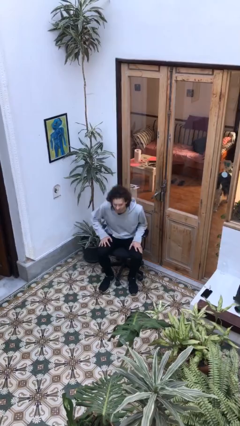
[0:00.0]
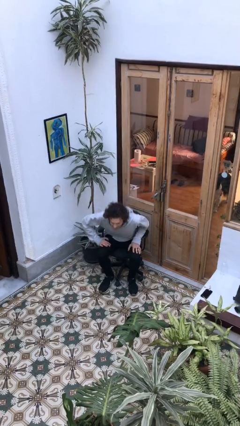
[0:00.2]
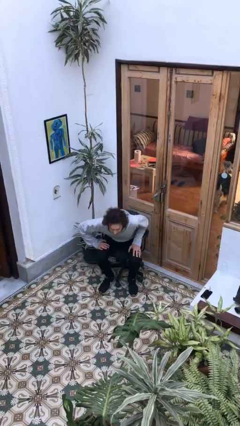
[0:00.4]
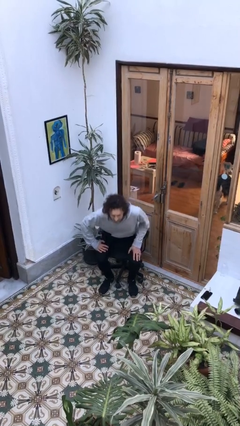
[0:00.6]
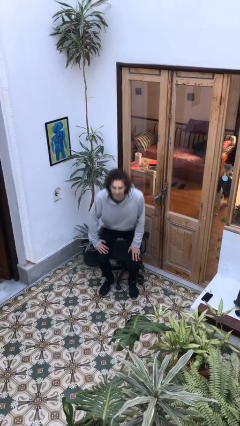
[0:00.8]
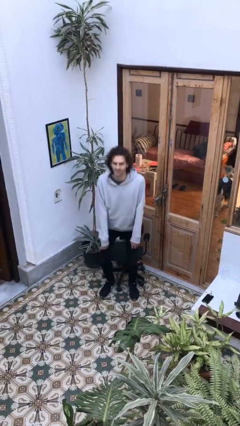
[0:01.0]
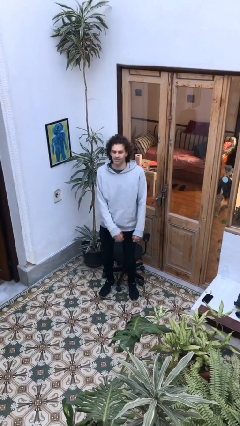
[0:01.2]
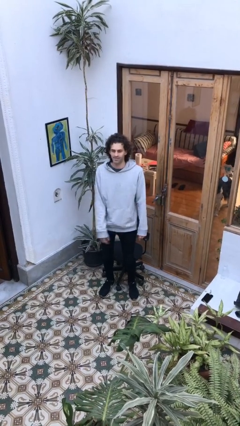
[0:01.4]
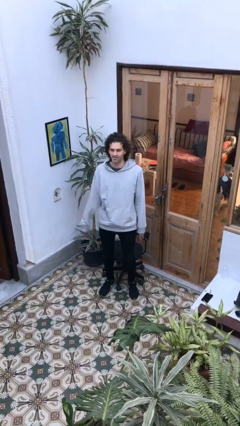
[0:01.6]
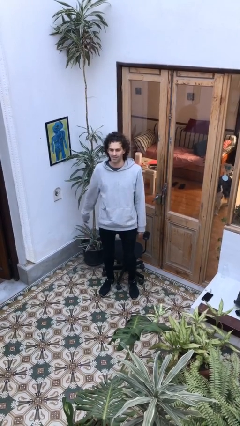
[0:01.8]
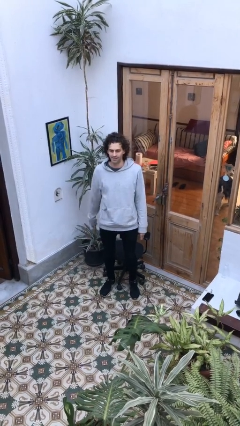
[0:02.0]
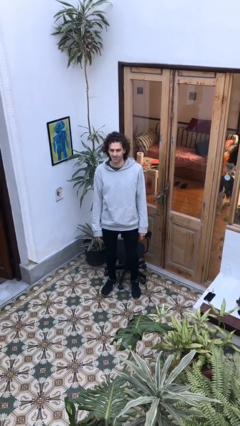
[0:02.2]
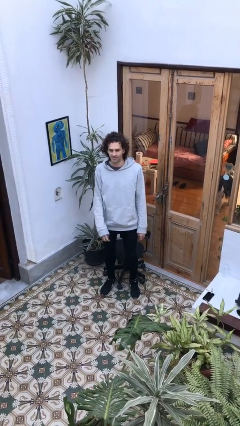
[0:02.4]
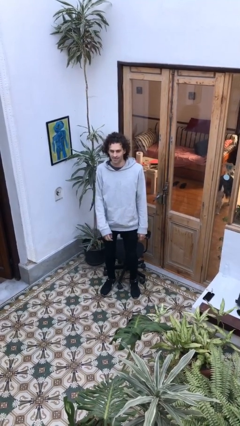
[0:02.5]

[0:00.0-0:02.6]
person stands up

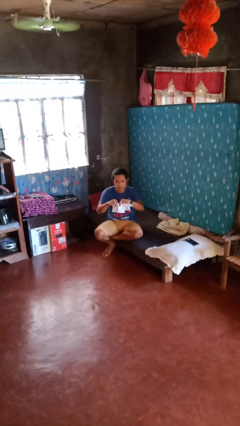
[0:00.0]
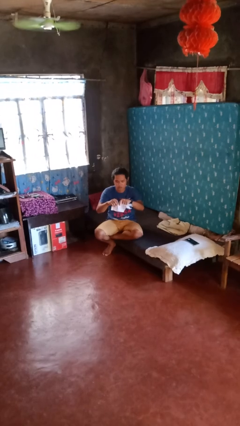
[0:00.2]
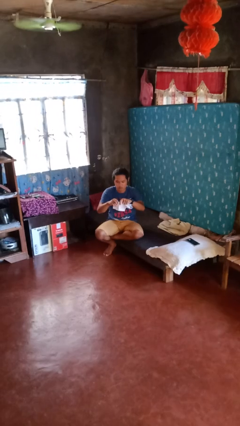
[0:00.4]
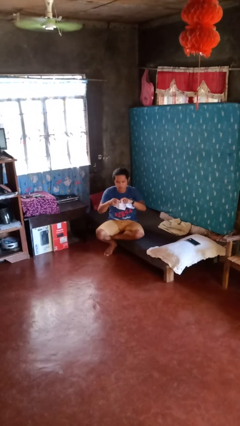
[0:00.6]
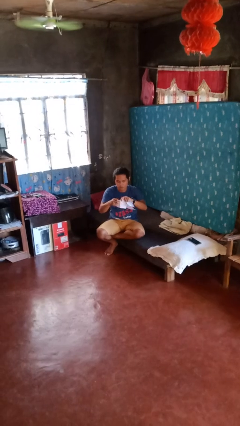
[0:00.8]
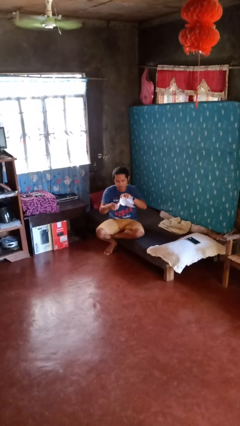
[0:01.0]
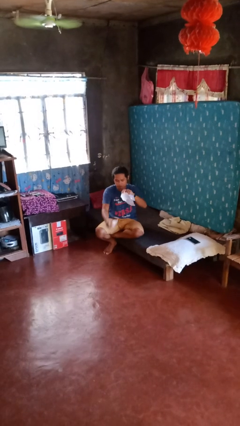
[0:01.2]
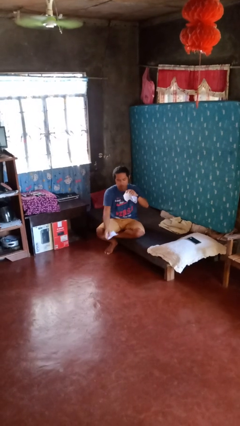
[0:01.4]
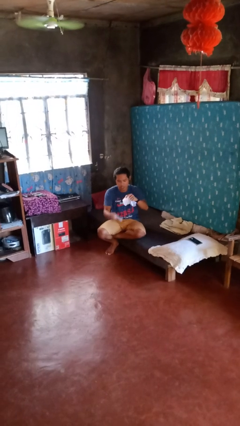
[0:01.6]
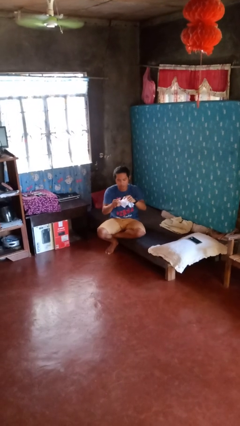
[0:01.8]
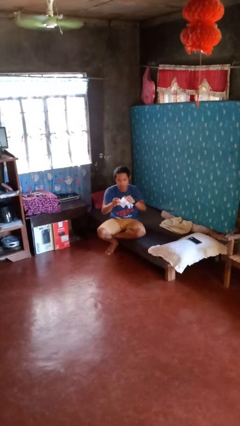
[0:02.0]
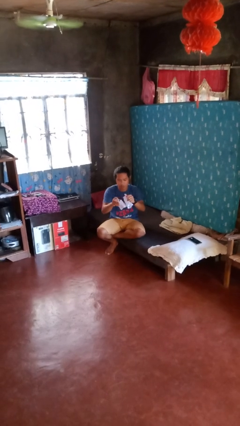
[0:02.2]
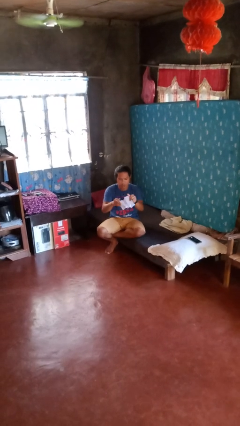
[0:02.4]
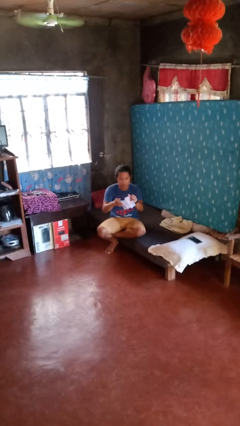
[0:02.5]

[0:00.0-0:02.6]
person tears paper

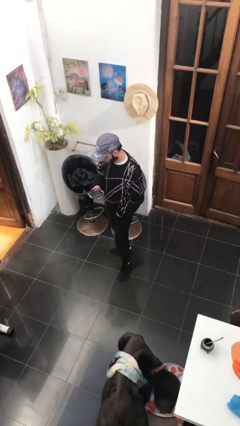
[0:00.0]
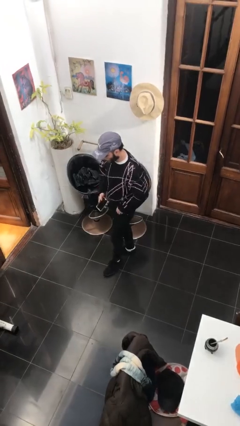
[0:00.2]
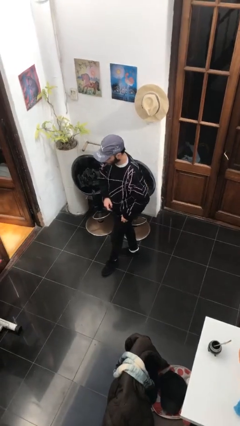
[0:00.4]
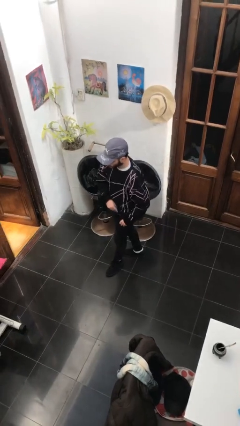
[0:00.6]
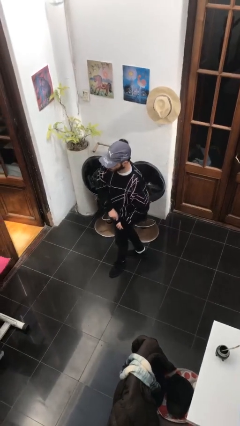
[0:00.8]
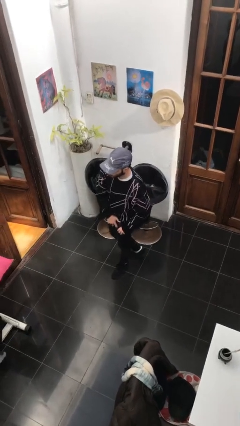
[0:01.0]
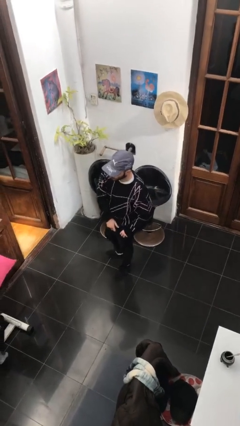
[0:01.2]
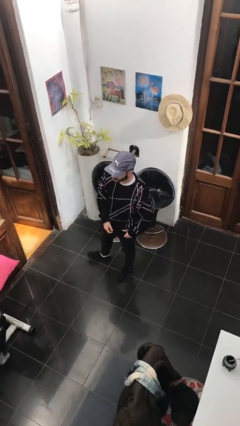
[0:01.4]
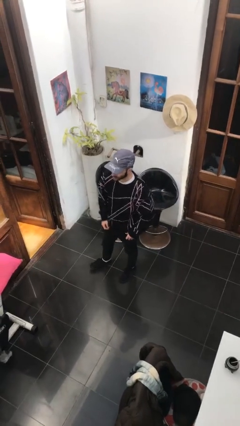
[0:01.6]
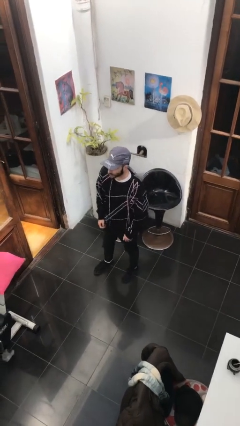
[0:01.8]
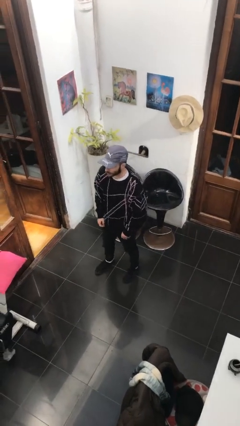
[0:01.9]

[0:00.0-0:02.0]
person puts phone into pocket

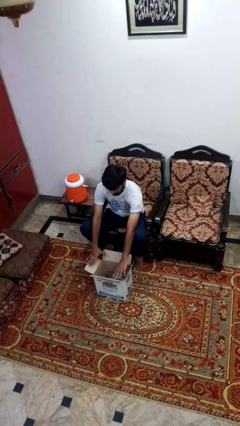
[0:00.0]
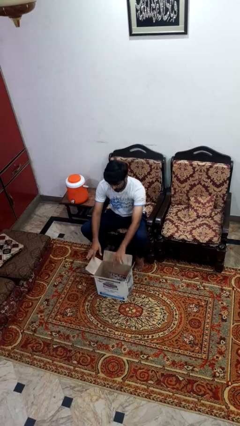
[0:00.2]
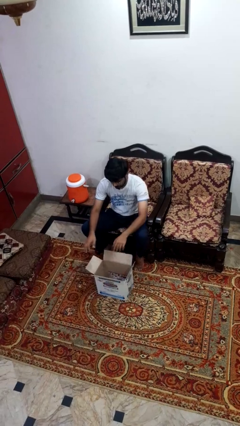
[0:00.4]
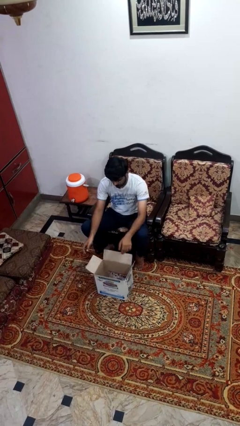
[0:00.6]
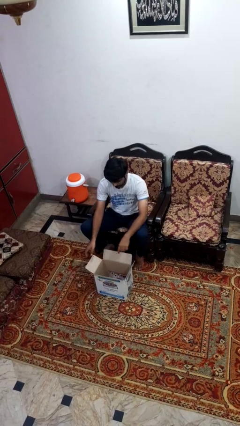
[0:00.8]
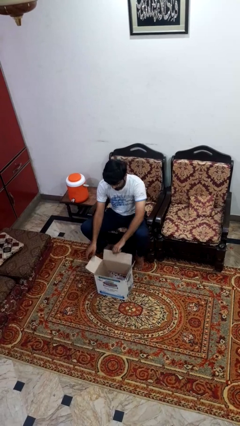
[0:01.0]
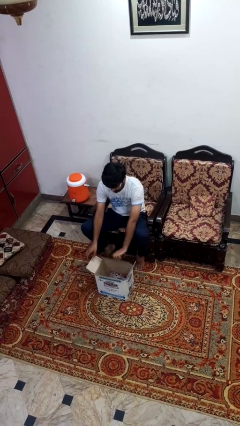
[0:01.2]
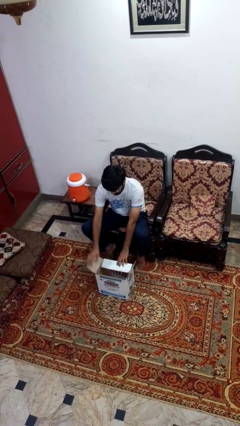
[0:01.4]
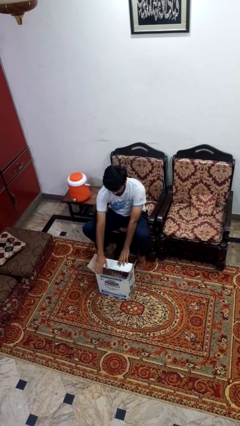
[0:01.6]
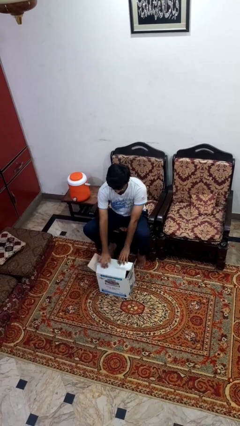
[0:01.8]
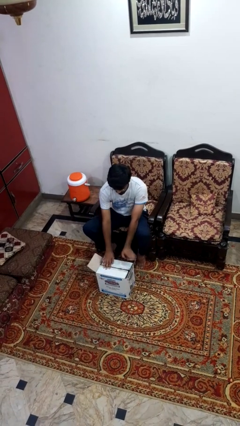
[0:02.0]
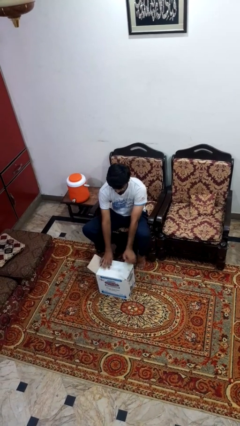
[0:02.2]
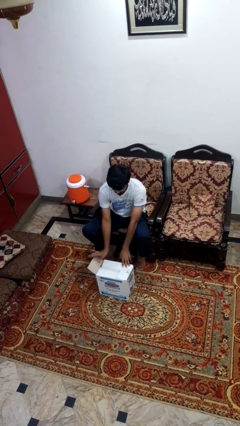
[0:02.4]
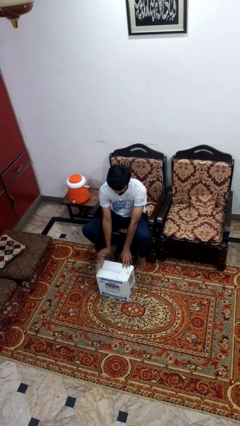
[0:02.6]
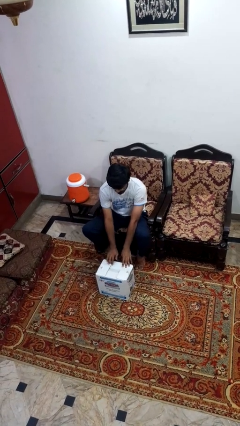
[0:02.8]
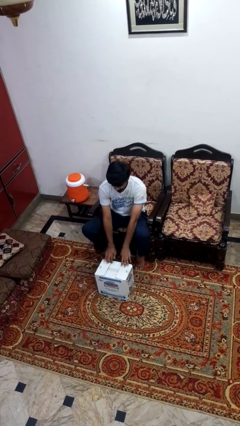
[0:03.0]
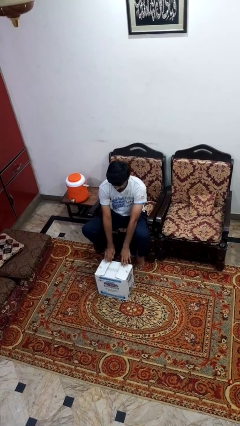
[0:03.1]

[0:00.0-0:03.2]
person closes box

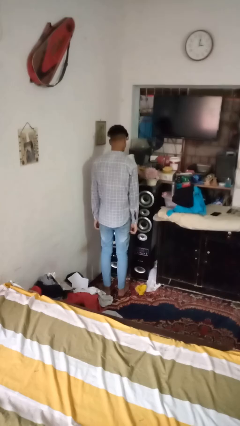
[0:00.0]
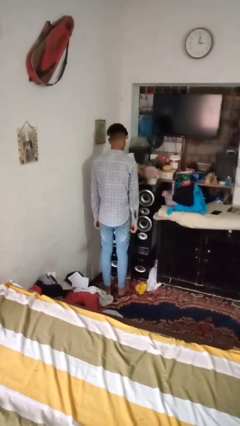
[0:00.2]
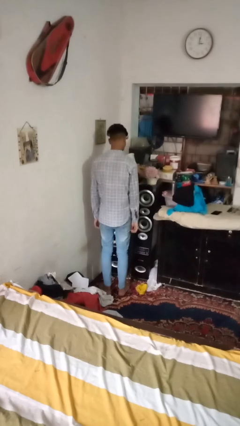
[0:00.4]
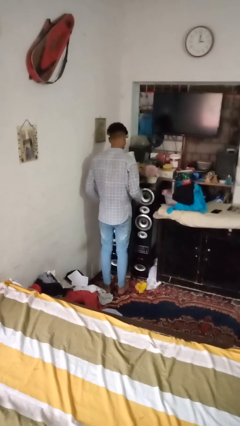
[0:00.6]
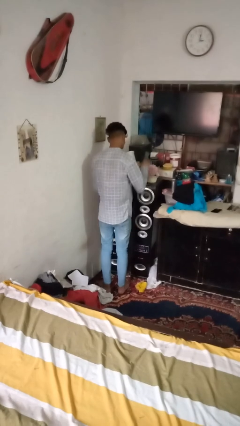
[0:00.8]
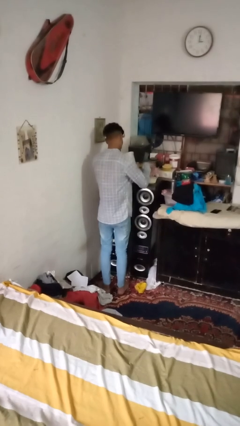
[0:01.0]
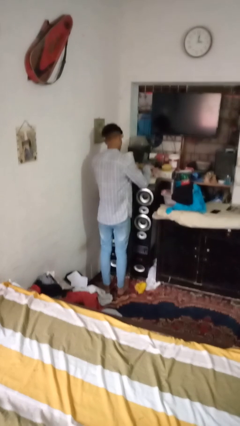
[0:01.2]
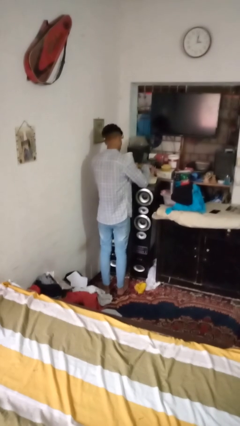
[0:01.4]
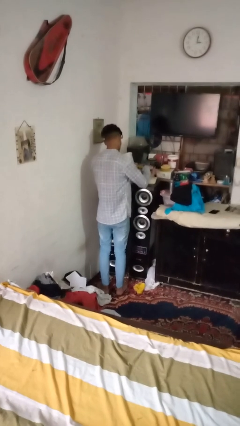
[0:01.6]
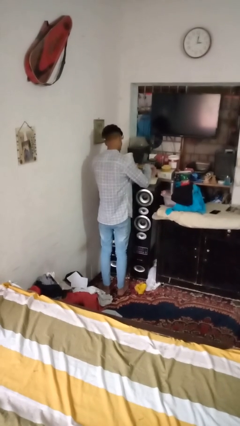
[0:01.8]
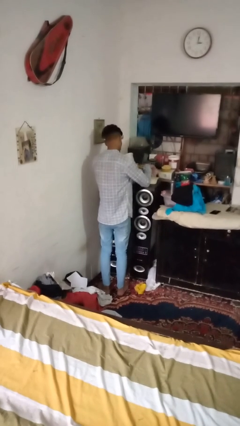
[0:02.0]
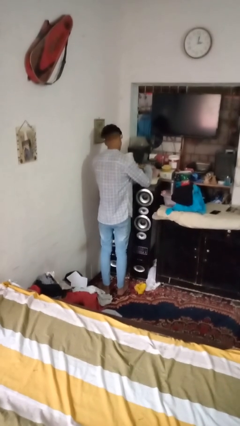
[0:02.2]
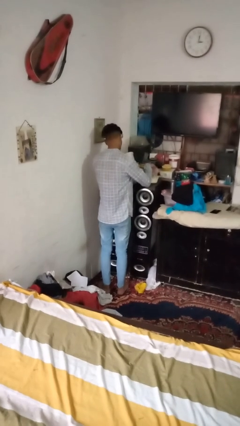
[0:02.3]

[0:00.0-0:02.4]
person arranges flowers in vase

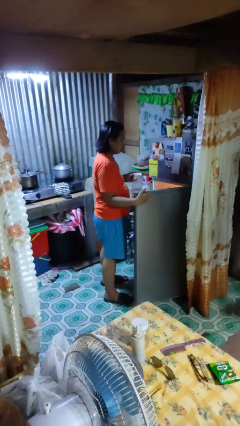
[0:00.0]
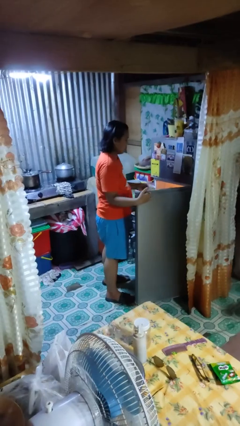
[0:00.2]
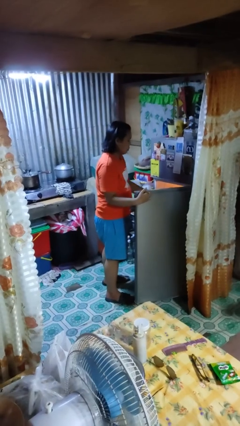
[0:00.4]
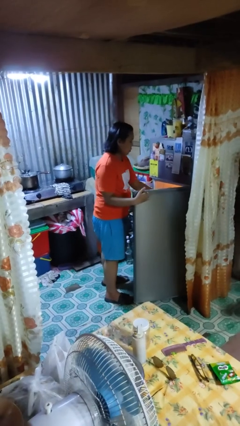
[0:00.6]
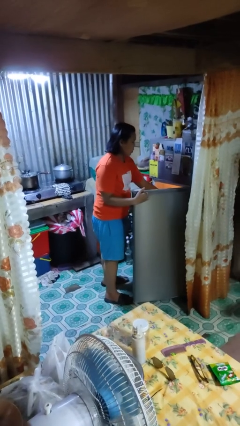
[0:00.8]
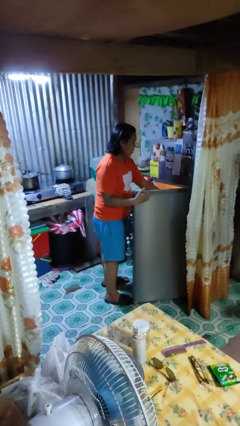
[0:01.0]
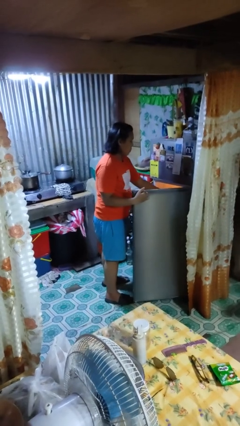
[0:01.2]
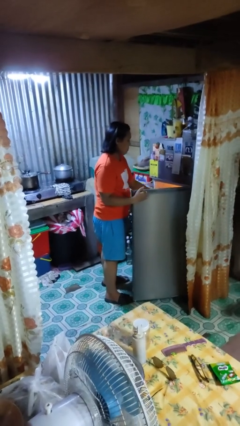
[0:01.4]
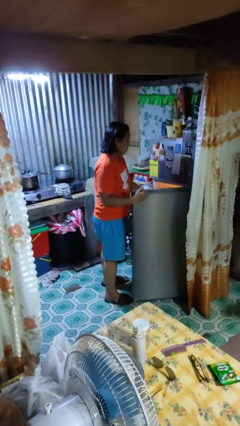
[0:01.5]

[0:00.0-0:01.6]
person puts object into refrigerator

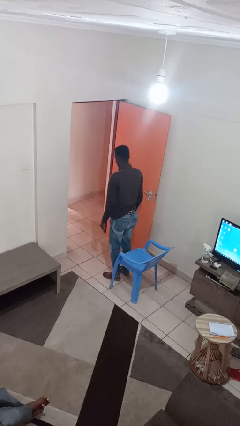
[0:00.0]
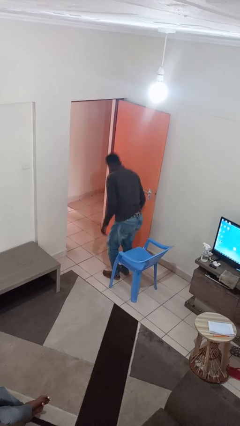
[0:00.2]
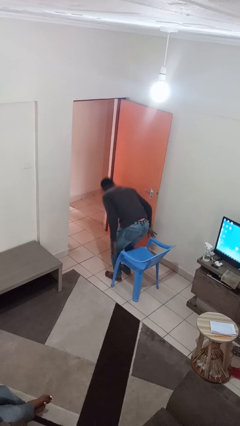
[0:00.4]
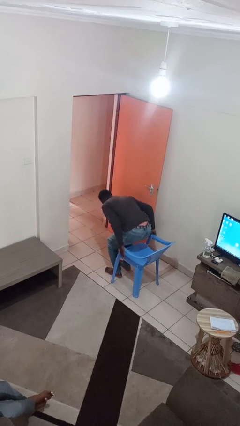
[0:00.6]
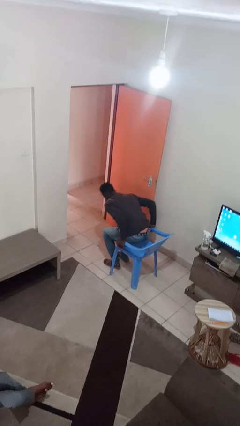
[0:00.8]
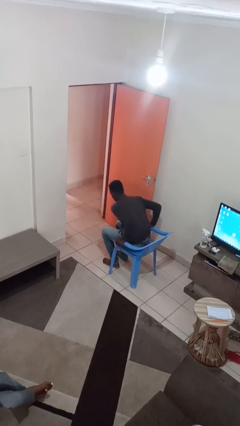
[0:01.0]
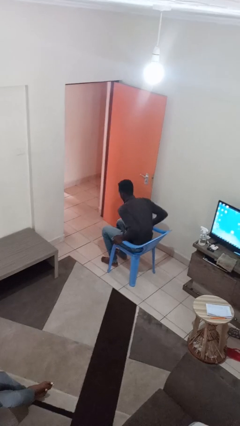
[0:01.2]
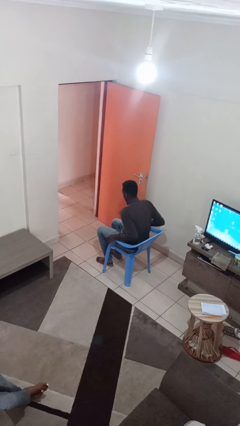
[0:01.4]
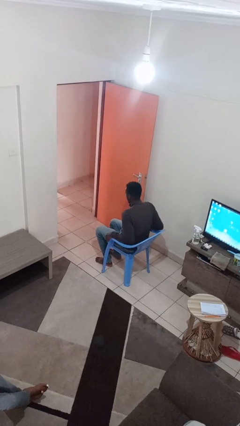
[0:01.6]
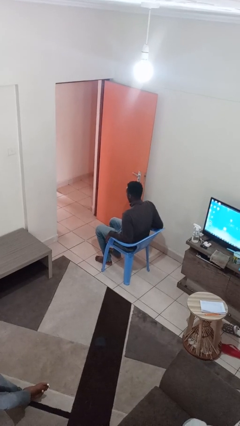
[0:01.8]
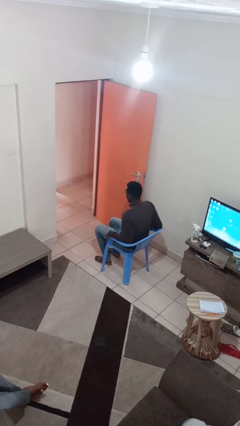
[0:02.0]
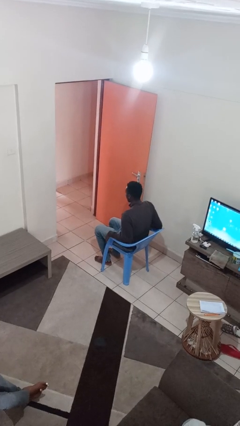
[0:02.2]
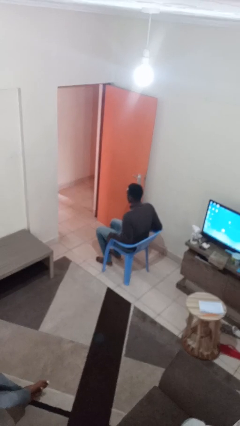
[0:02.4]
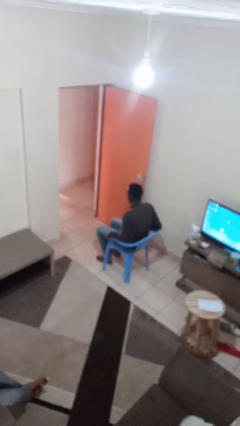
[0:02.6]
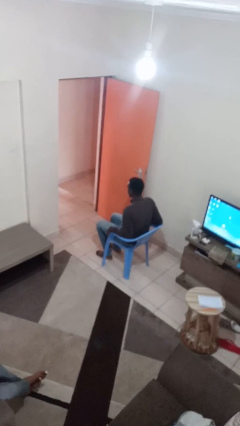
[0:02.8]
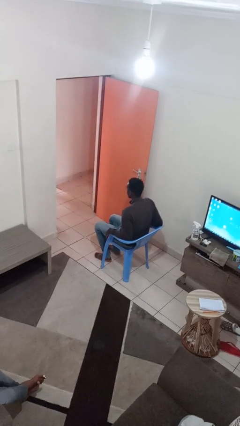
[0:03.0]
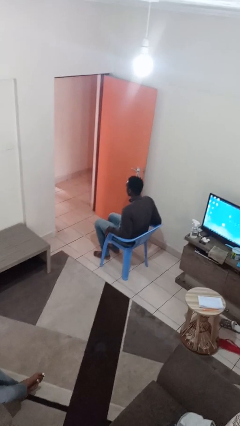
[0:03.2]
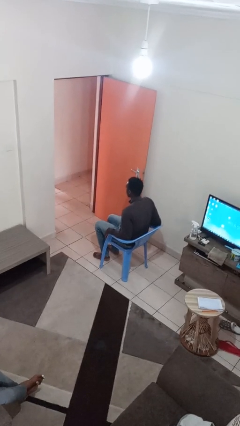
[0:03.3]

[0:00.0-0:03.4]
person sits down
